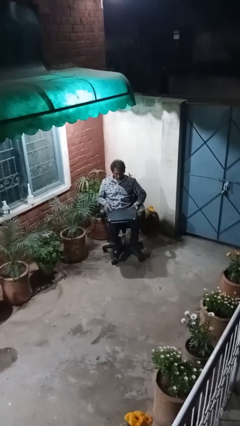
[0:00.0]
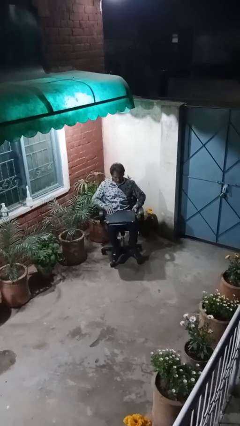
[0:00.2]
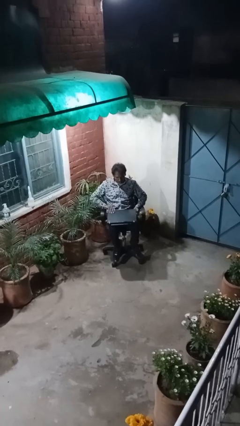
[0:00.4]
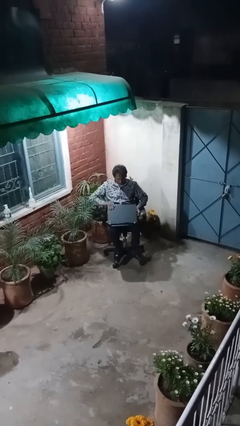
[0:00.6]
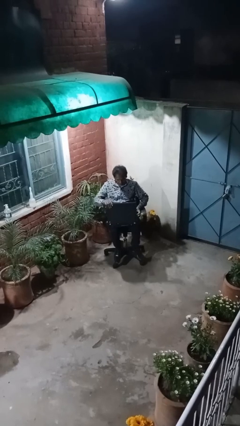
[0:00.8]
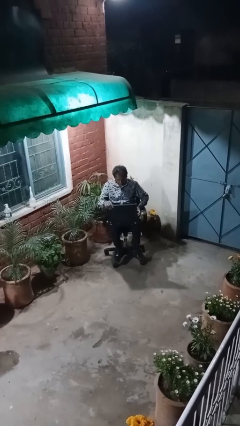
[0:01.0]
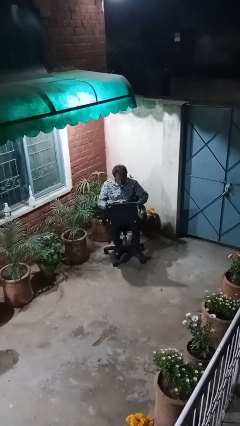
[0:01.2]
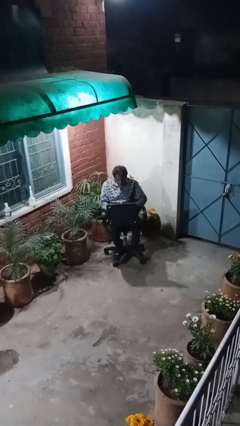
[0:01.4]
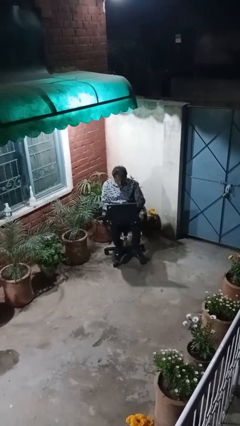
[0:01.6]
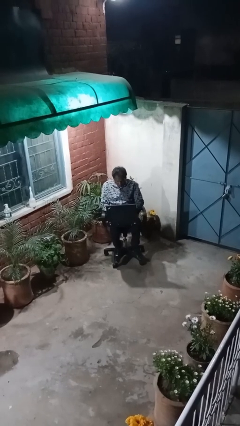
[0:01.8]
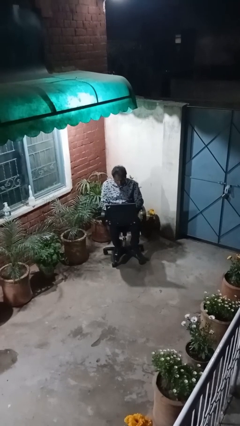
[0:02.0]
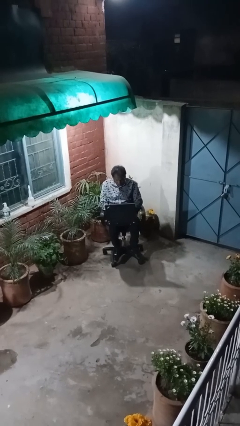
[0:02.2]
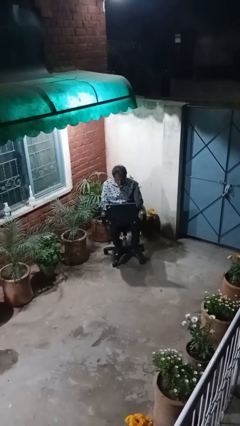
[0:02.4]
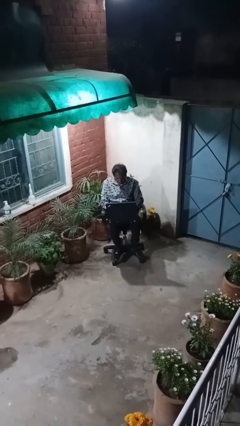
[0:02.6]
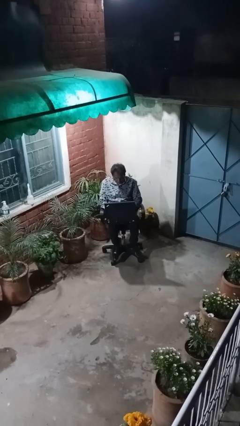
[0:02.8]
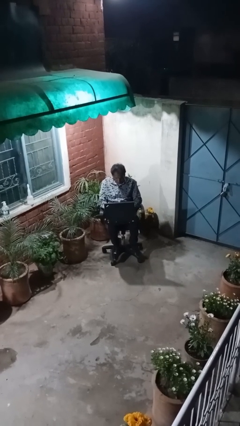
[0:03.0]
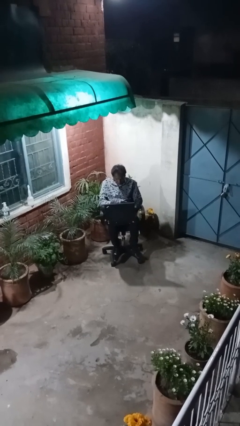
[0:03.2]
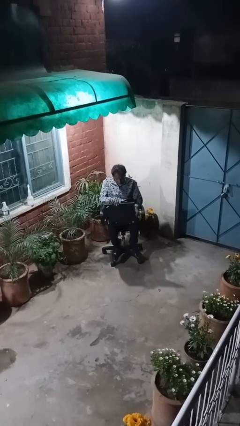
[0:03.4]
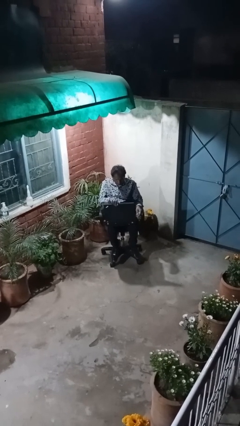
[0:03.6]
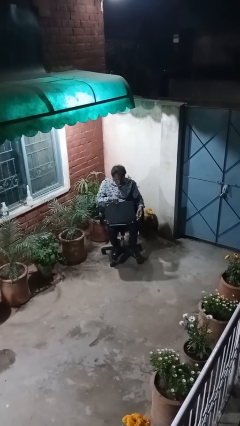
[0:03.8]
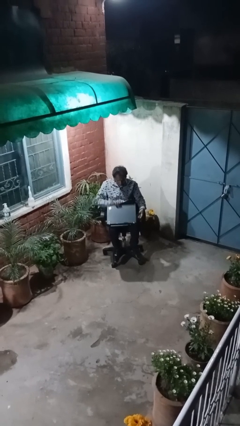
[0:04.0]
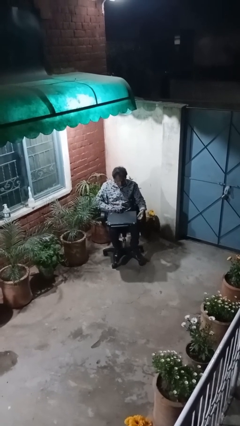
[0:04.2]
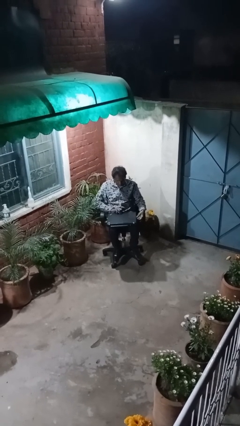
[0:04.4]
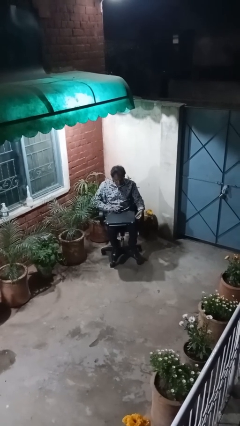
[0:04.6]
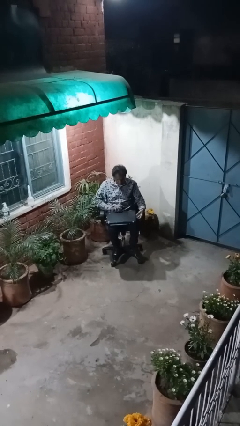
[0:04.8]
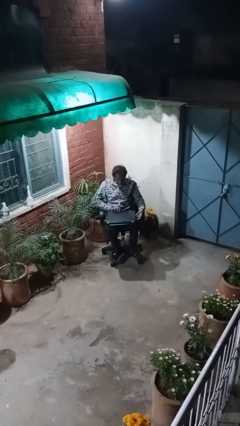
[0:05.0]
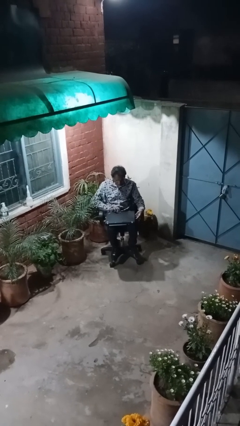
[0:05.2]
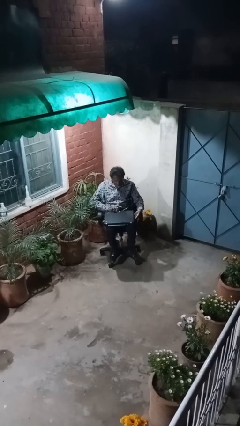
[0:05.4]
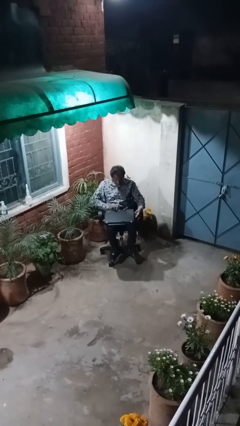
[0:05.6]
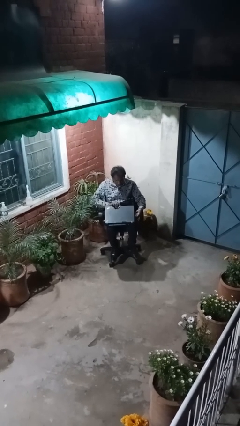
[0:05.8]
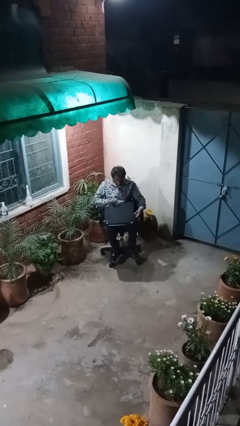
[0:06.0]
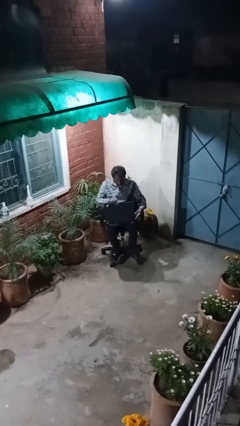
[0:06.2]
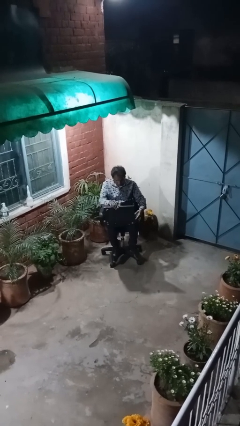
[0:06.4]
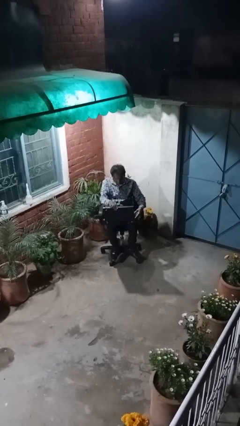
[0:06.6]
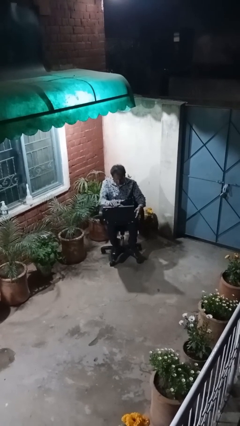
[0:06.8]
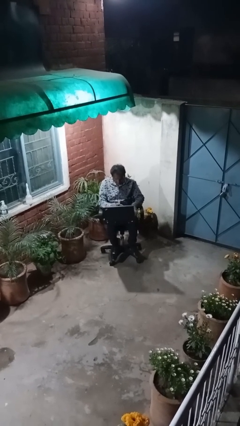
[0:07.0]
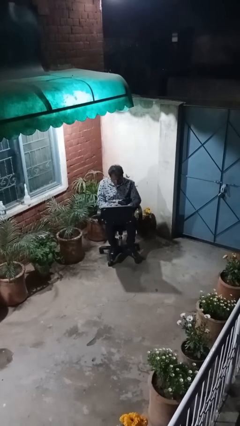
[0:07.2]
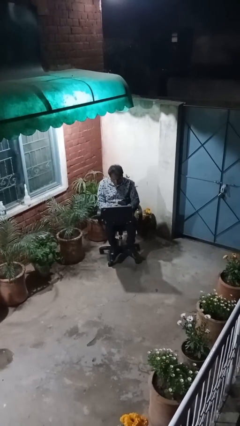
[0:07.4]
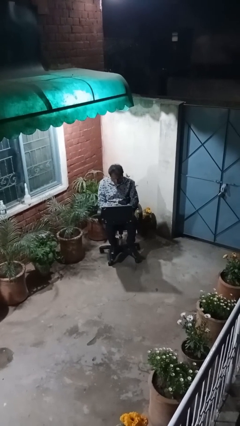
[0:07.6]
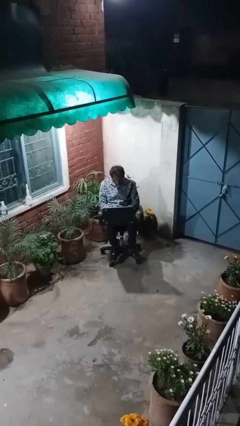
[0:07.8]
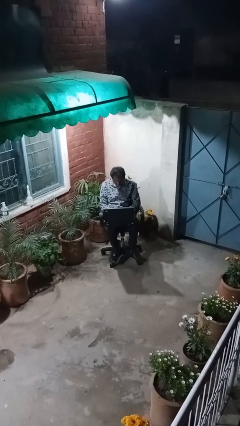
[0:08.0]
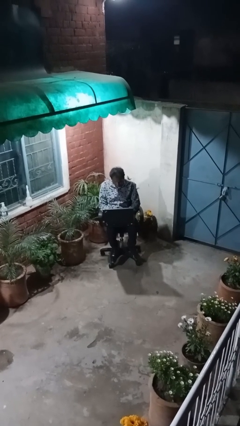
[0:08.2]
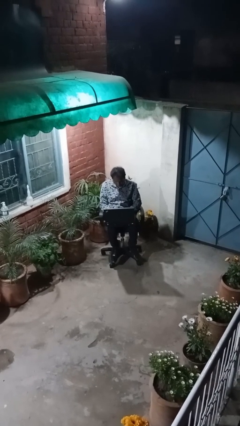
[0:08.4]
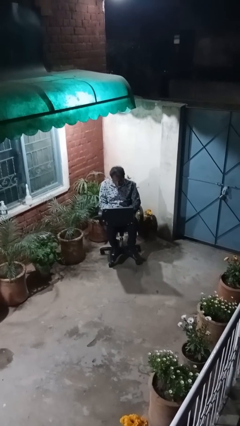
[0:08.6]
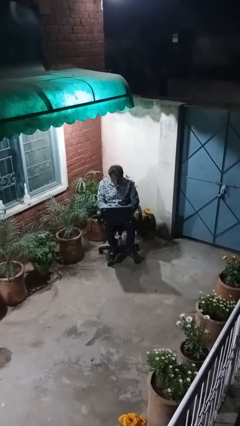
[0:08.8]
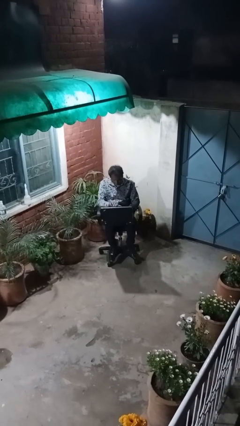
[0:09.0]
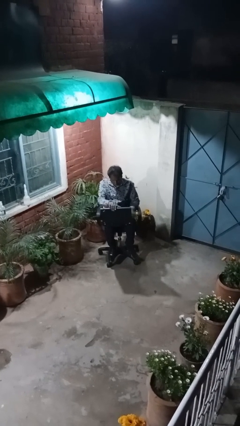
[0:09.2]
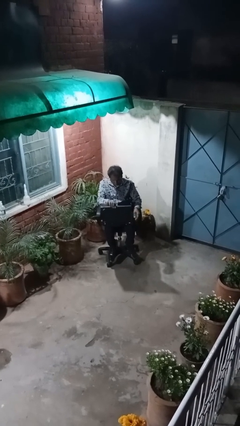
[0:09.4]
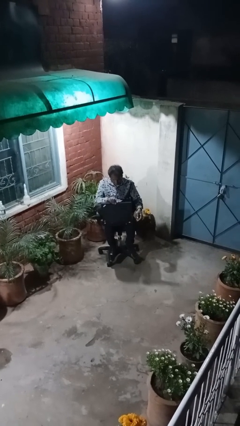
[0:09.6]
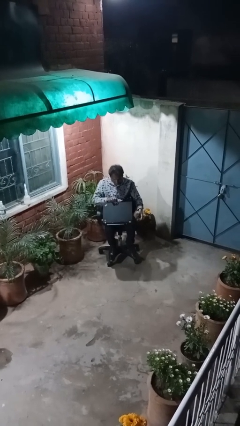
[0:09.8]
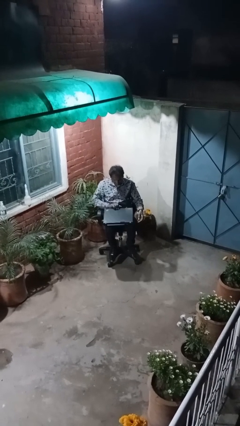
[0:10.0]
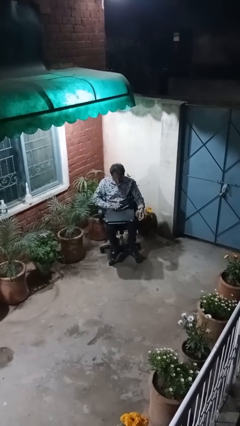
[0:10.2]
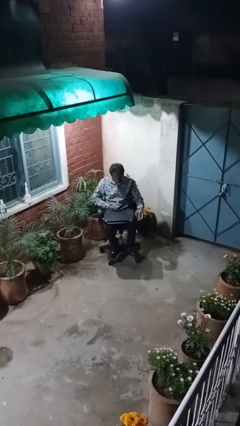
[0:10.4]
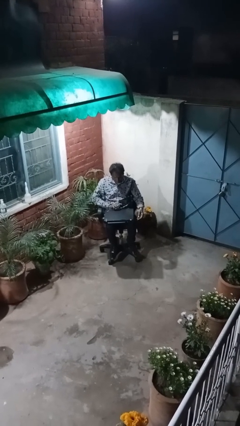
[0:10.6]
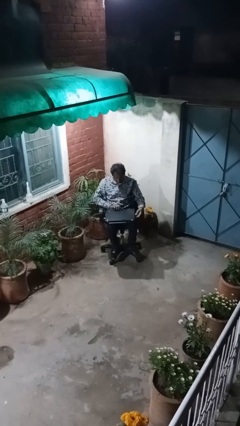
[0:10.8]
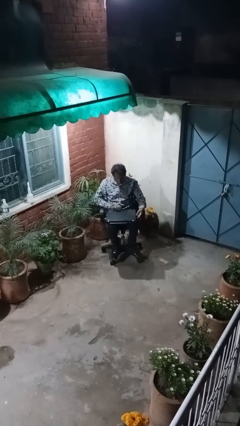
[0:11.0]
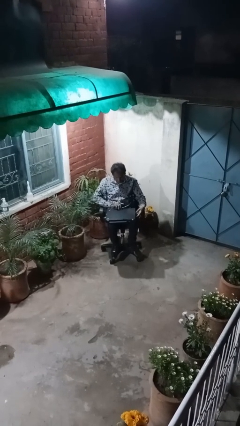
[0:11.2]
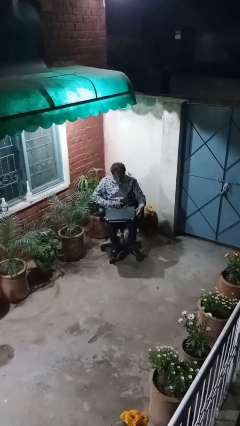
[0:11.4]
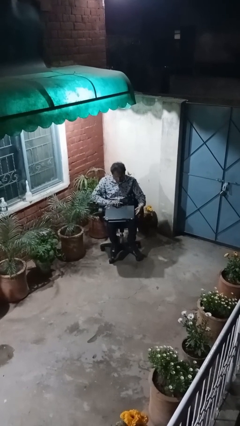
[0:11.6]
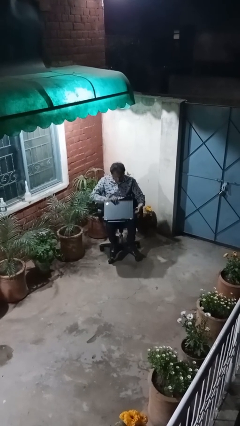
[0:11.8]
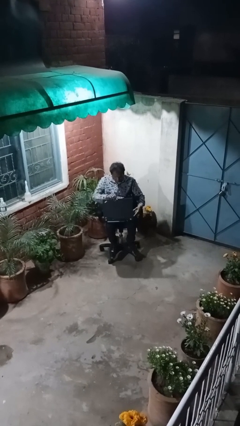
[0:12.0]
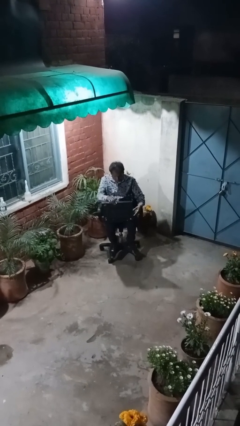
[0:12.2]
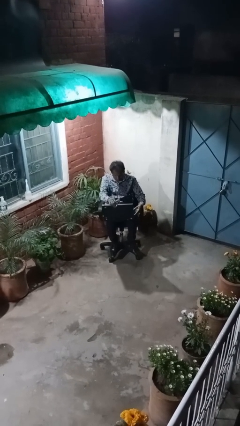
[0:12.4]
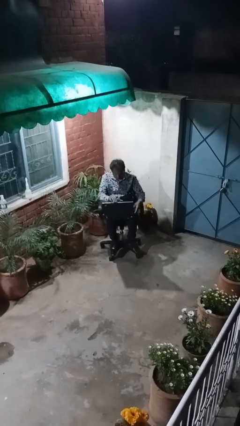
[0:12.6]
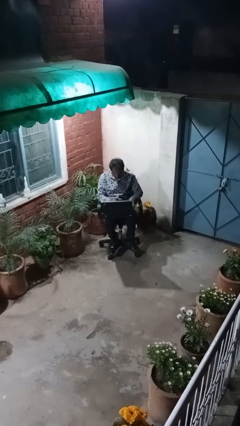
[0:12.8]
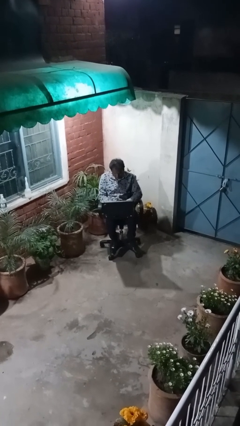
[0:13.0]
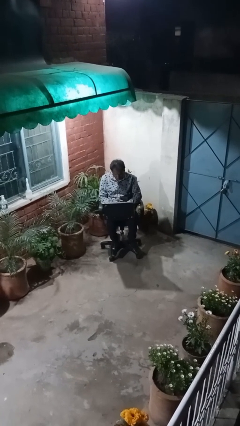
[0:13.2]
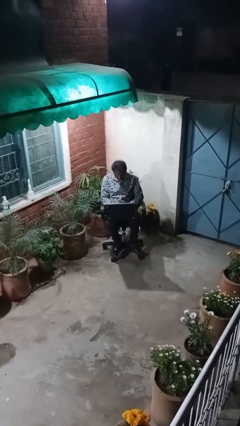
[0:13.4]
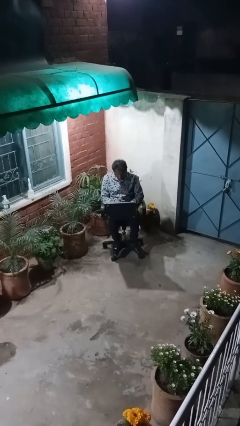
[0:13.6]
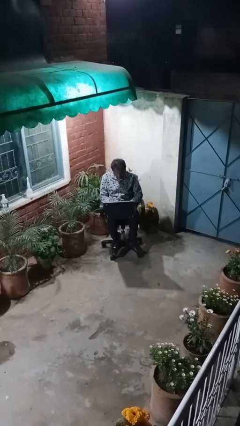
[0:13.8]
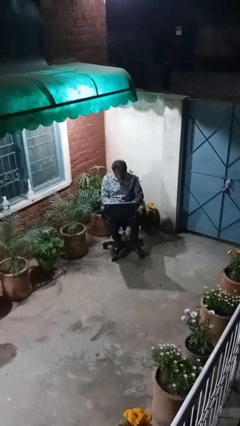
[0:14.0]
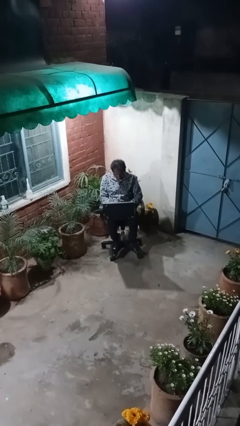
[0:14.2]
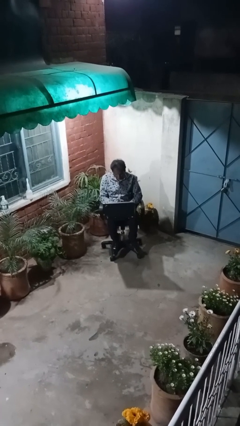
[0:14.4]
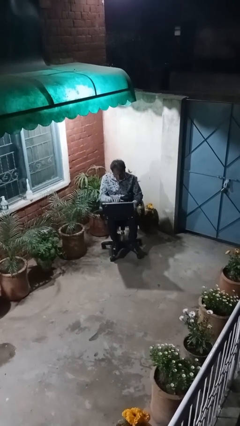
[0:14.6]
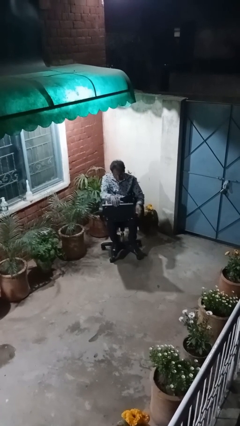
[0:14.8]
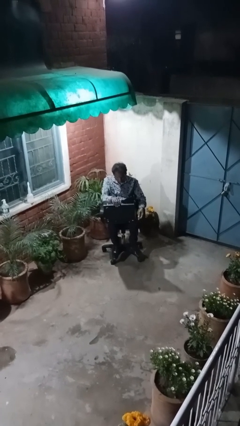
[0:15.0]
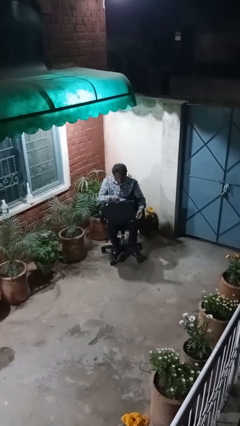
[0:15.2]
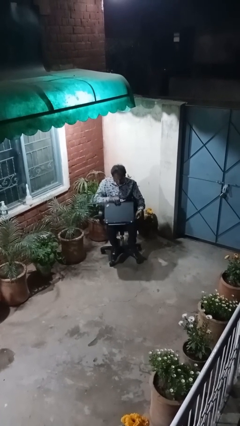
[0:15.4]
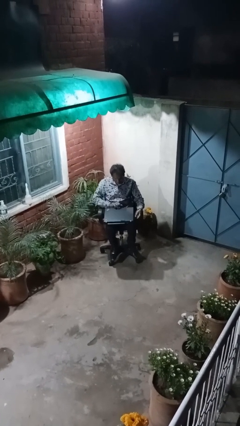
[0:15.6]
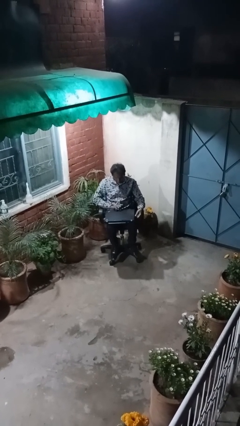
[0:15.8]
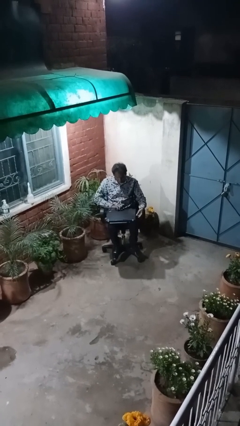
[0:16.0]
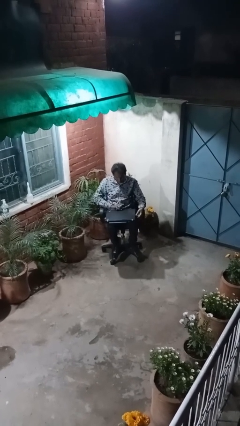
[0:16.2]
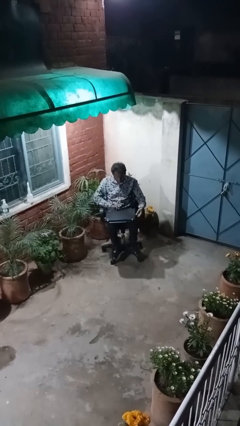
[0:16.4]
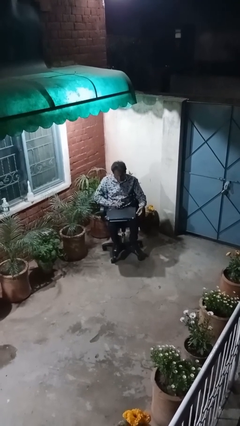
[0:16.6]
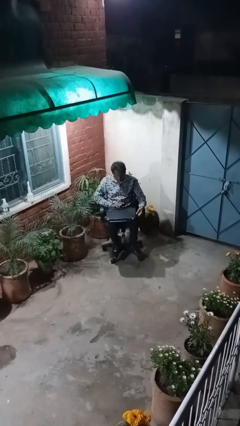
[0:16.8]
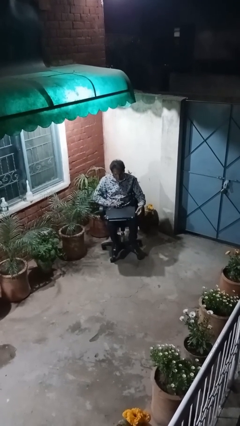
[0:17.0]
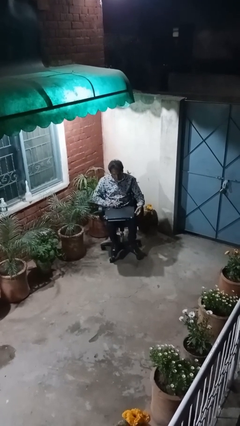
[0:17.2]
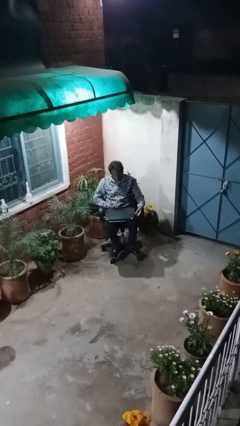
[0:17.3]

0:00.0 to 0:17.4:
person interacts with laptop

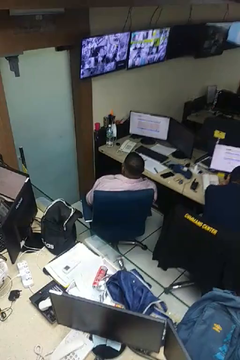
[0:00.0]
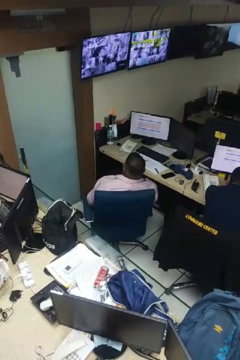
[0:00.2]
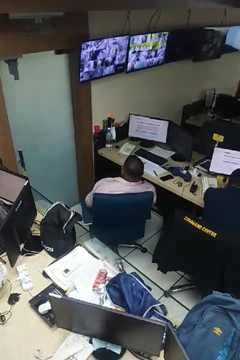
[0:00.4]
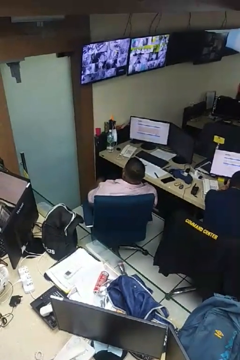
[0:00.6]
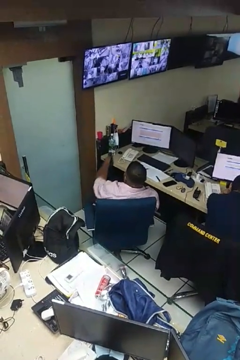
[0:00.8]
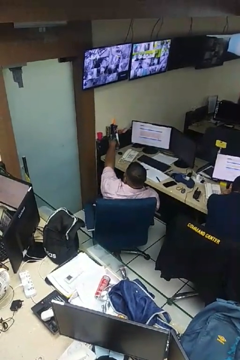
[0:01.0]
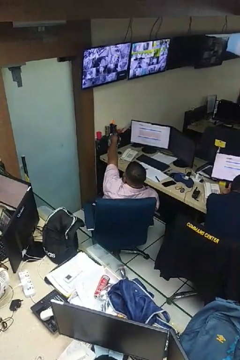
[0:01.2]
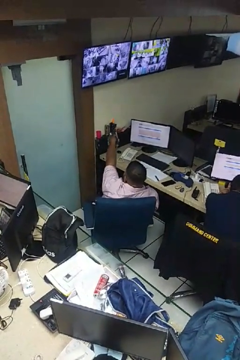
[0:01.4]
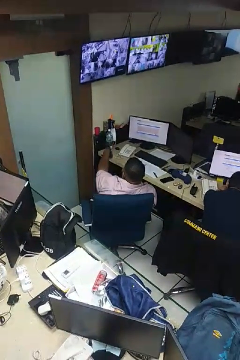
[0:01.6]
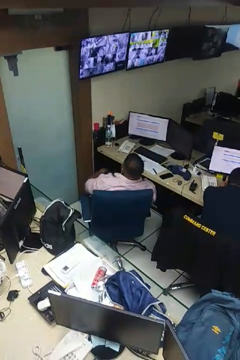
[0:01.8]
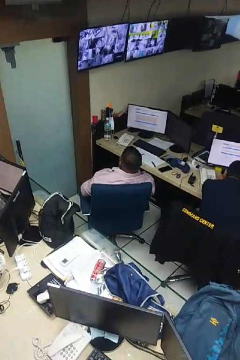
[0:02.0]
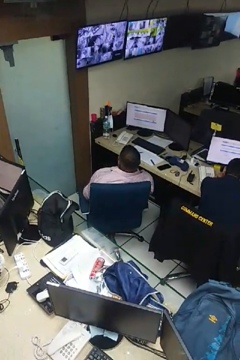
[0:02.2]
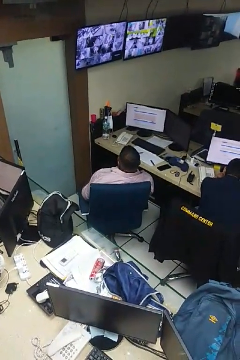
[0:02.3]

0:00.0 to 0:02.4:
person uses television remote
